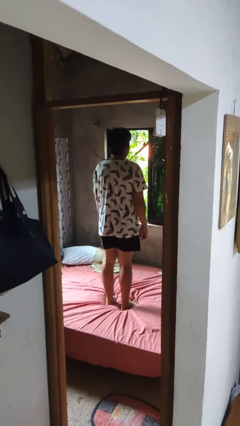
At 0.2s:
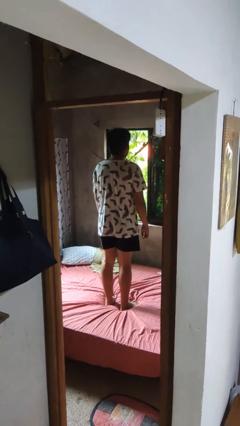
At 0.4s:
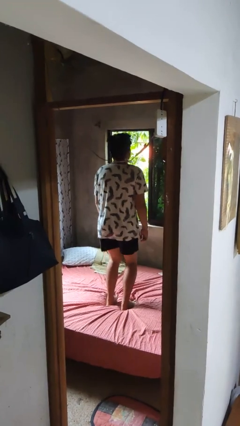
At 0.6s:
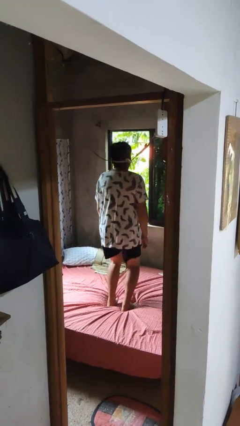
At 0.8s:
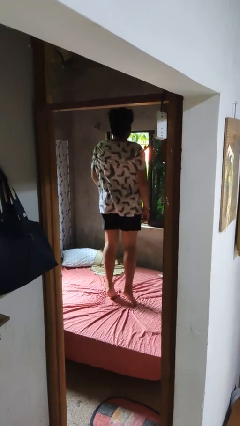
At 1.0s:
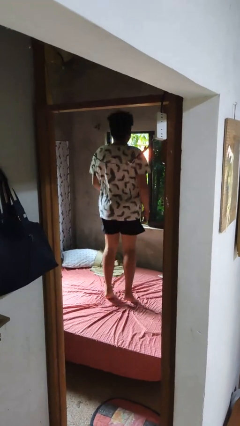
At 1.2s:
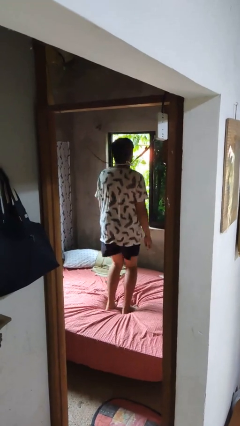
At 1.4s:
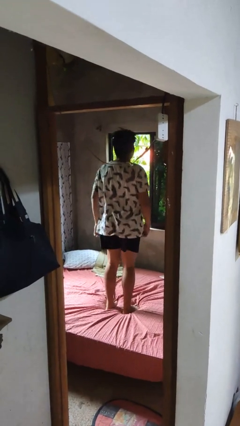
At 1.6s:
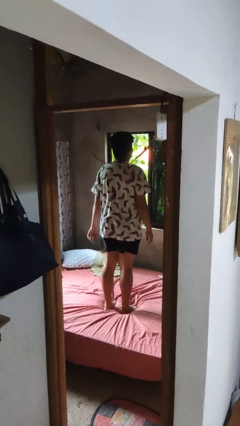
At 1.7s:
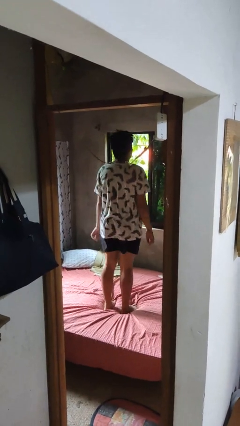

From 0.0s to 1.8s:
person jumps on bed

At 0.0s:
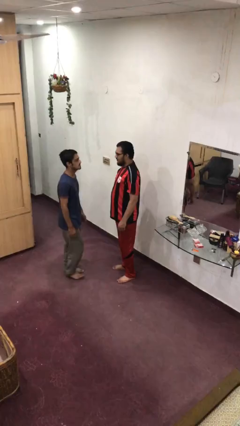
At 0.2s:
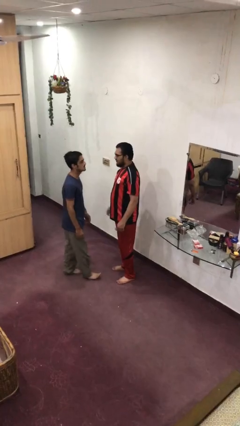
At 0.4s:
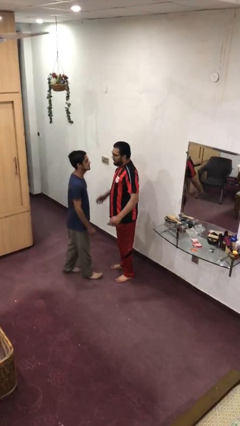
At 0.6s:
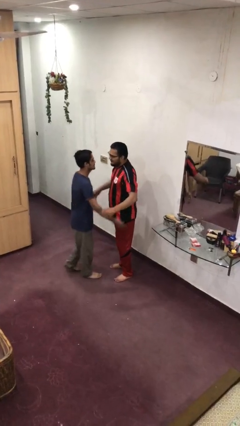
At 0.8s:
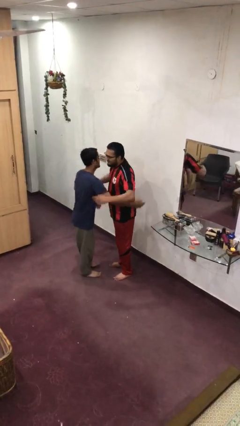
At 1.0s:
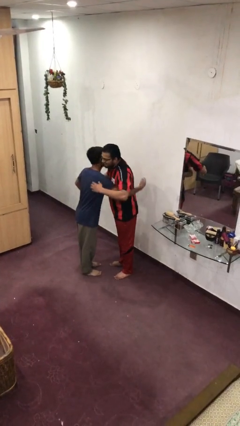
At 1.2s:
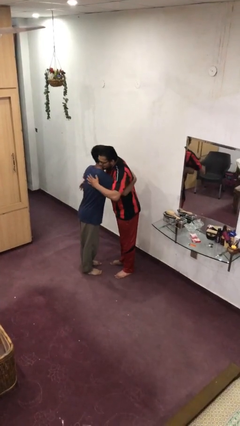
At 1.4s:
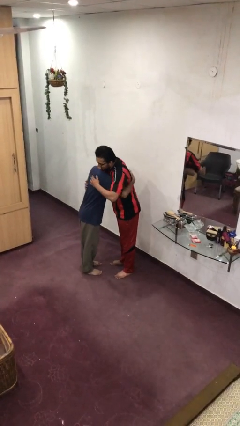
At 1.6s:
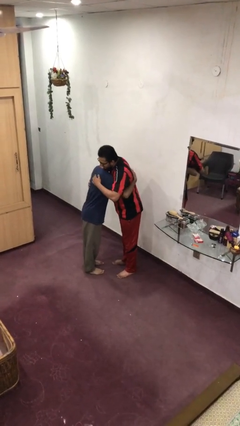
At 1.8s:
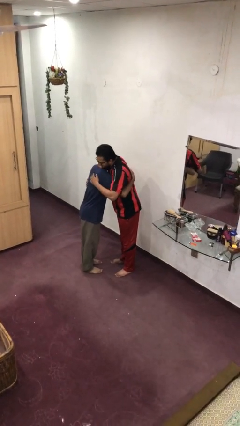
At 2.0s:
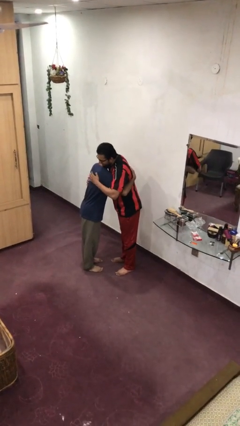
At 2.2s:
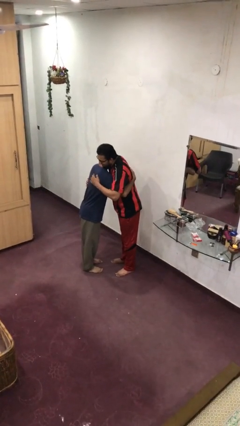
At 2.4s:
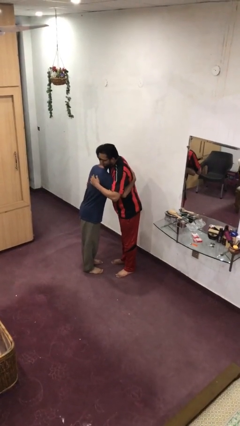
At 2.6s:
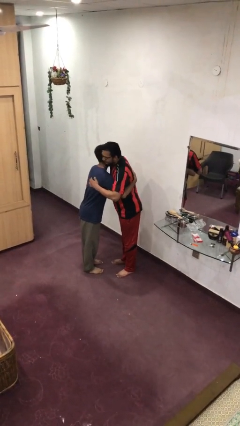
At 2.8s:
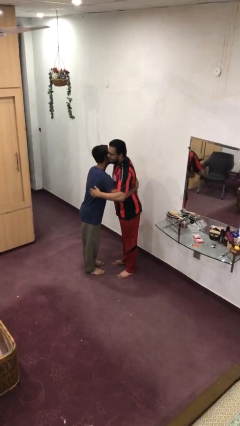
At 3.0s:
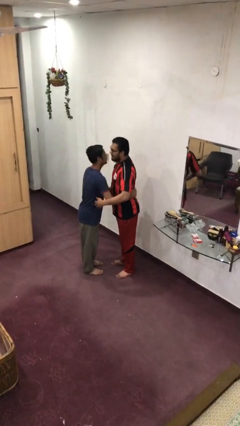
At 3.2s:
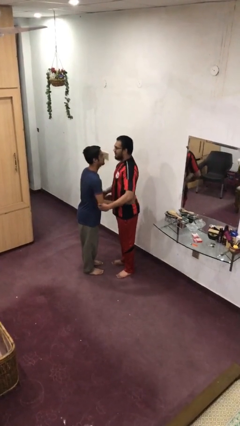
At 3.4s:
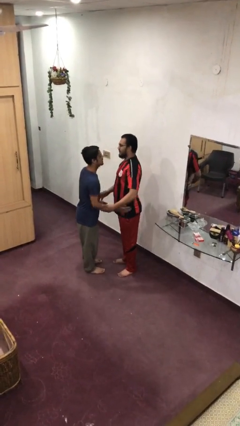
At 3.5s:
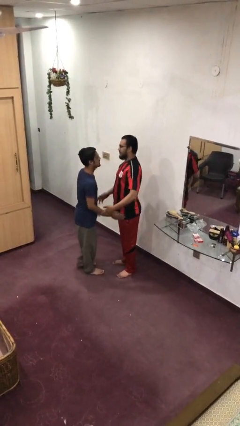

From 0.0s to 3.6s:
person embraces person

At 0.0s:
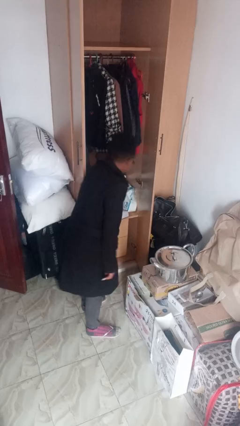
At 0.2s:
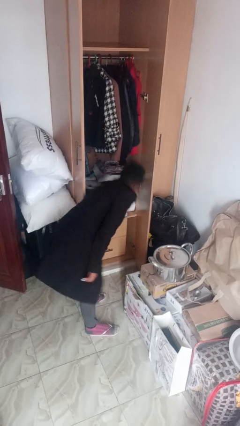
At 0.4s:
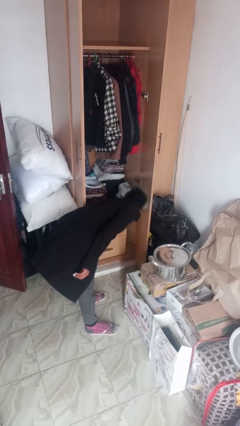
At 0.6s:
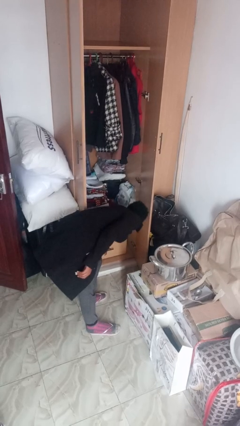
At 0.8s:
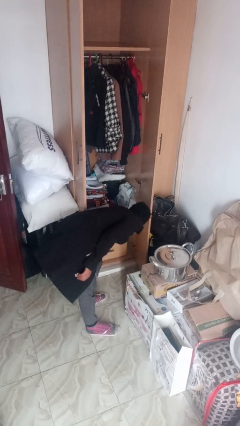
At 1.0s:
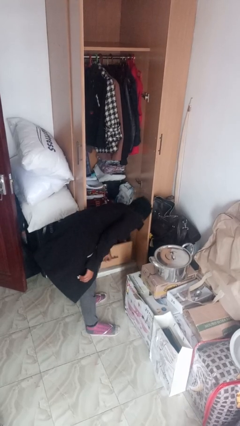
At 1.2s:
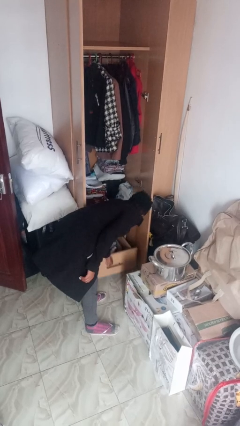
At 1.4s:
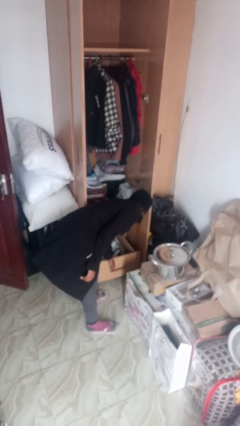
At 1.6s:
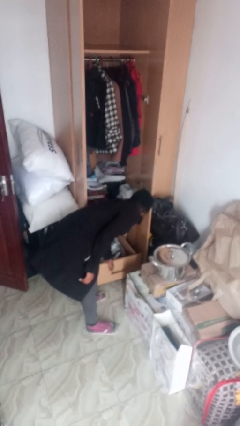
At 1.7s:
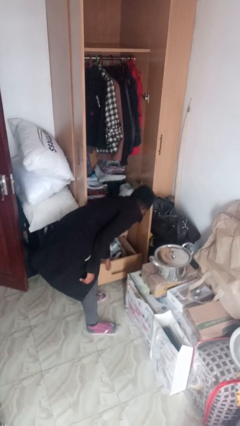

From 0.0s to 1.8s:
person opens dresser drawer

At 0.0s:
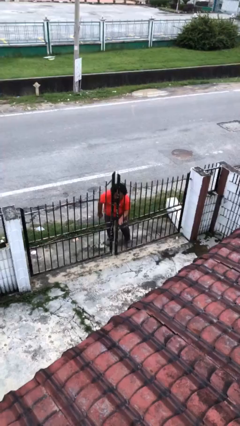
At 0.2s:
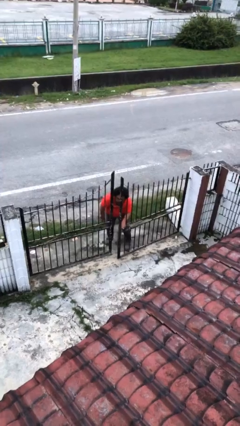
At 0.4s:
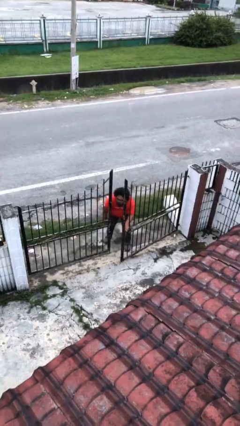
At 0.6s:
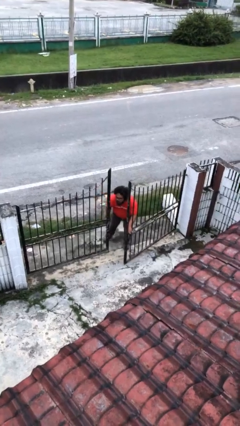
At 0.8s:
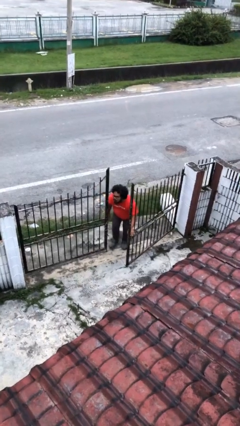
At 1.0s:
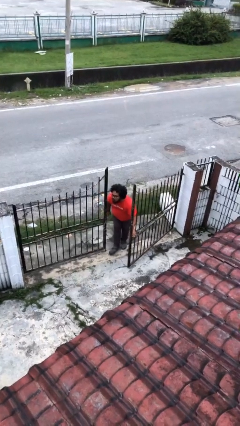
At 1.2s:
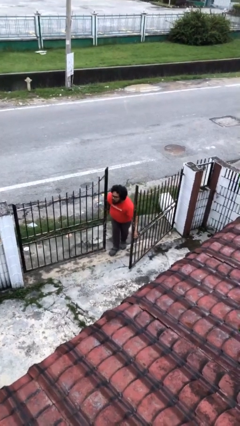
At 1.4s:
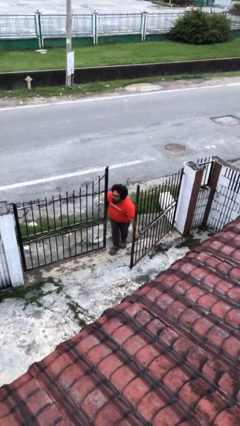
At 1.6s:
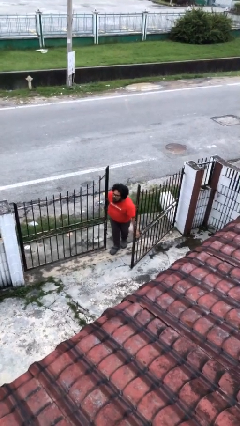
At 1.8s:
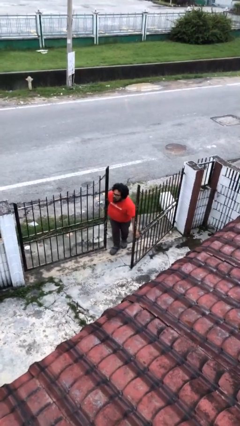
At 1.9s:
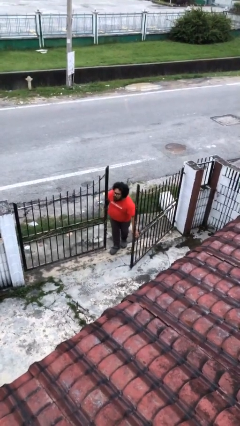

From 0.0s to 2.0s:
person opens facility door

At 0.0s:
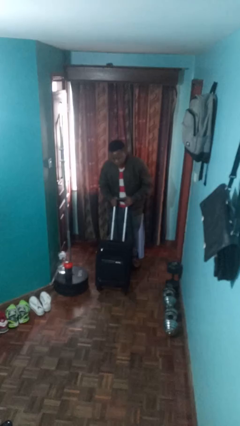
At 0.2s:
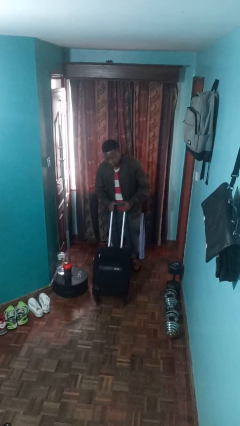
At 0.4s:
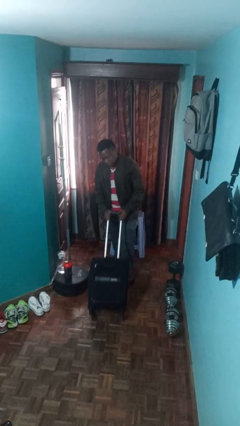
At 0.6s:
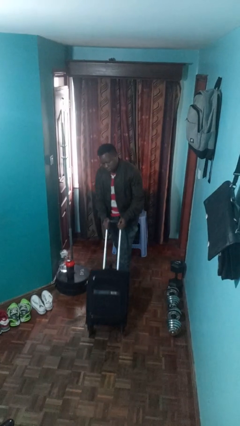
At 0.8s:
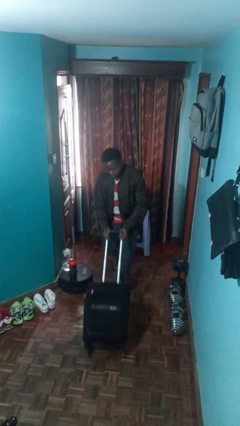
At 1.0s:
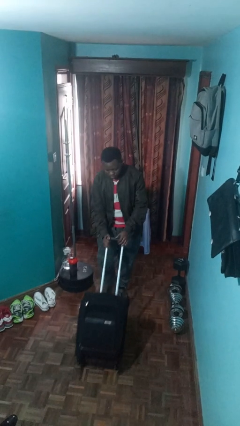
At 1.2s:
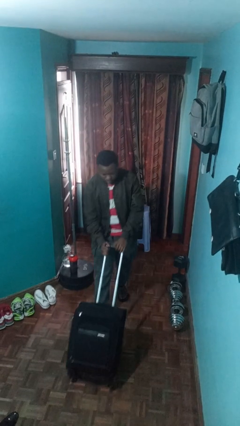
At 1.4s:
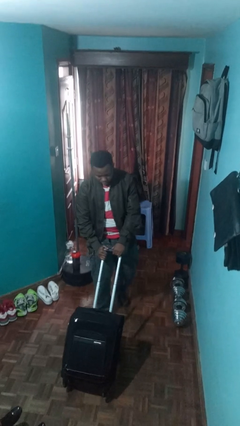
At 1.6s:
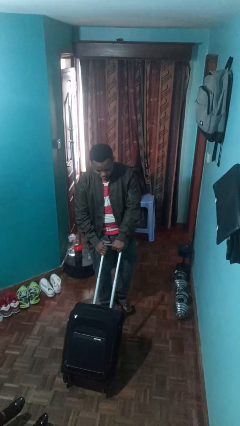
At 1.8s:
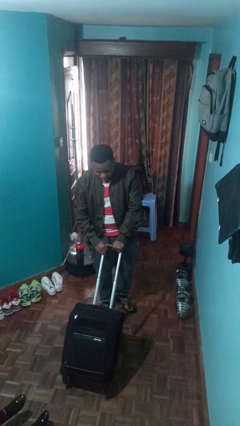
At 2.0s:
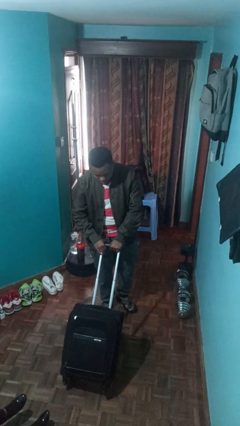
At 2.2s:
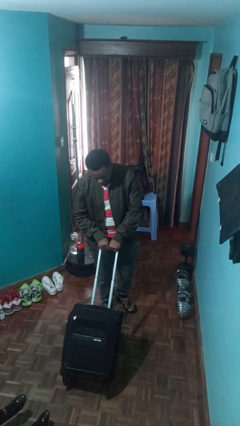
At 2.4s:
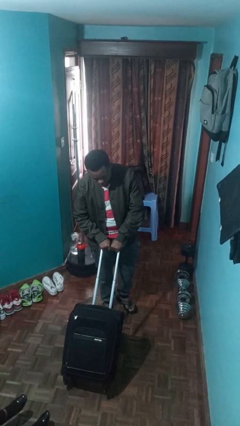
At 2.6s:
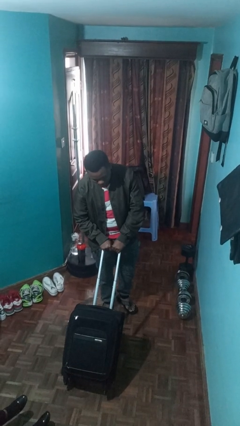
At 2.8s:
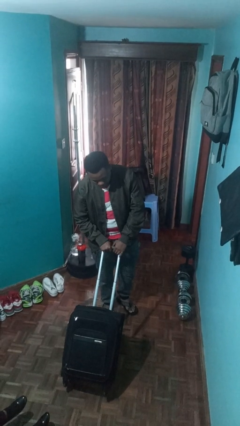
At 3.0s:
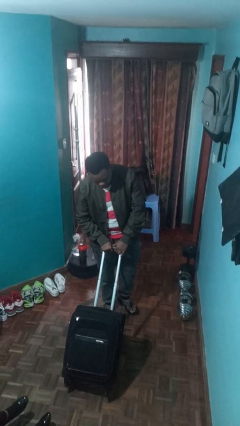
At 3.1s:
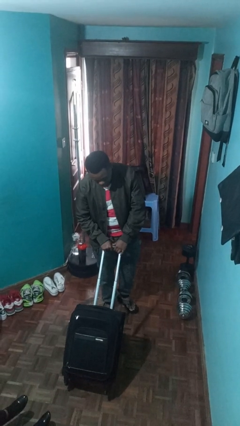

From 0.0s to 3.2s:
person pushes wheeled cart

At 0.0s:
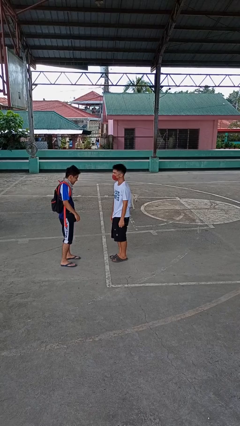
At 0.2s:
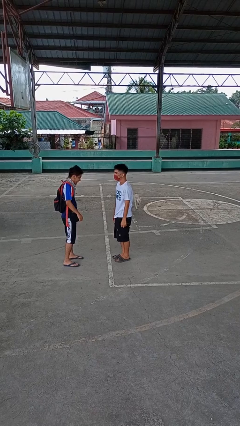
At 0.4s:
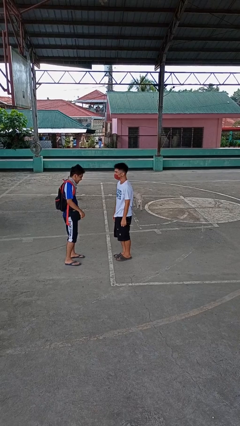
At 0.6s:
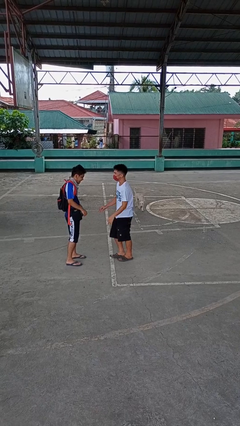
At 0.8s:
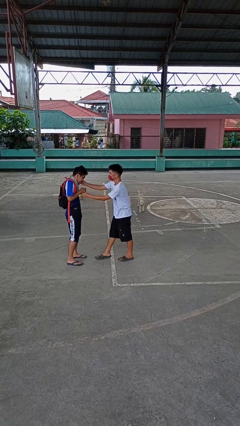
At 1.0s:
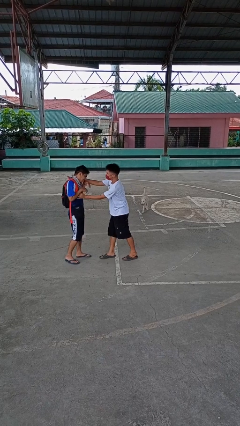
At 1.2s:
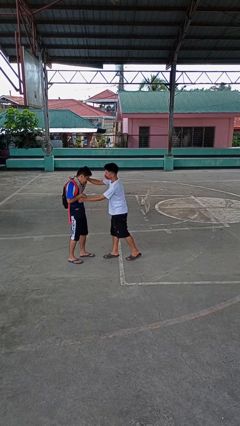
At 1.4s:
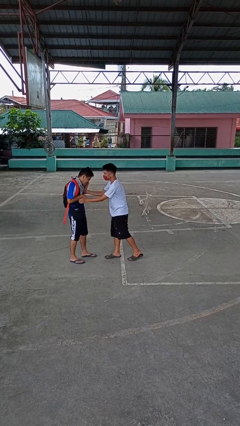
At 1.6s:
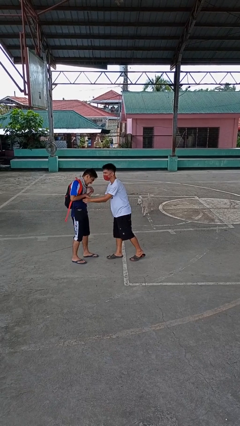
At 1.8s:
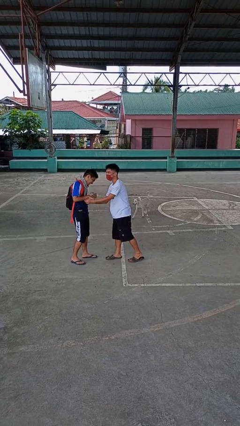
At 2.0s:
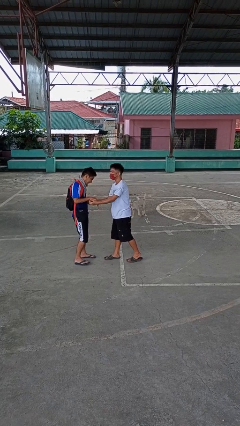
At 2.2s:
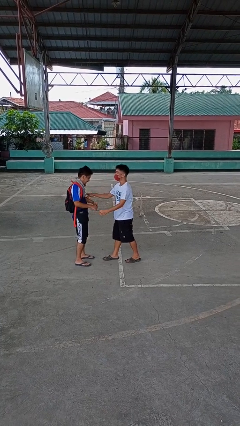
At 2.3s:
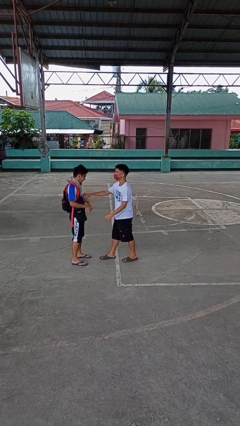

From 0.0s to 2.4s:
person tickles person

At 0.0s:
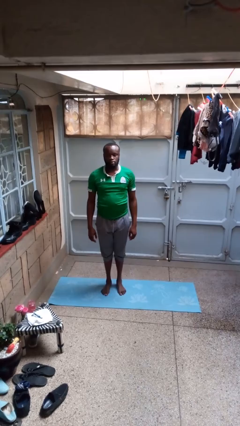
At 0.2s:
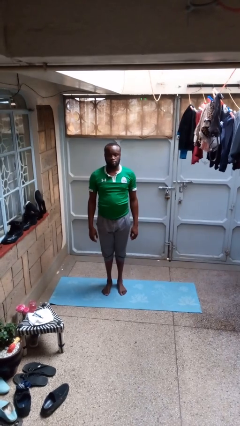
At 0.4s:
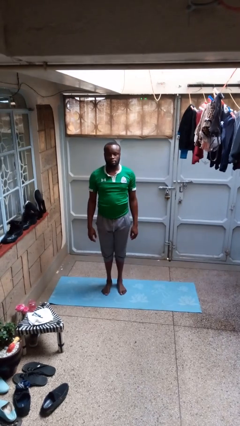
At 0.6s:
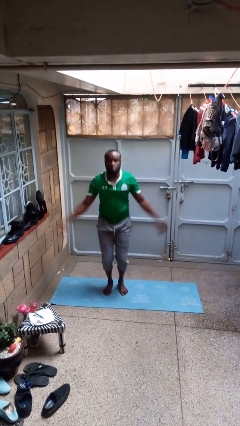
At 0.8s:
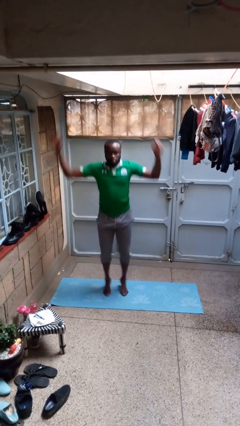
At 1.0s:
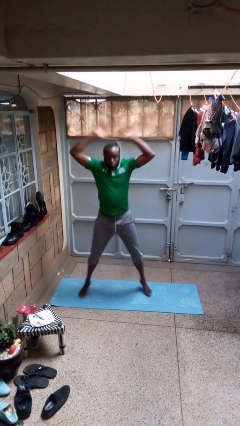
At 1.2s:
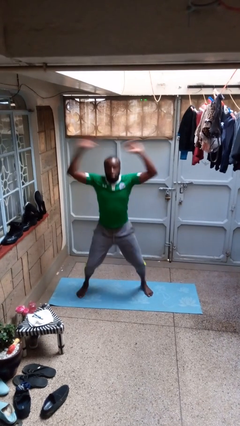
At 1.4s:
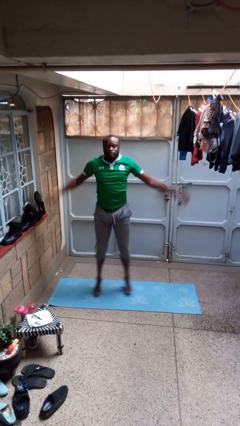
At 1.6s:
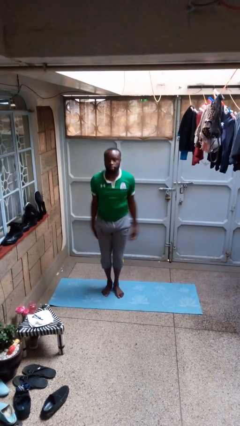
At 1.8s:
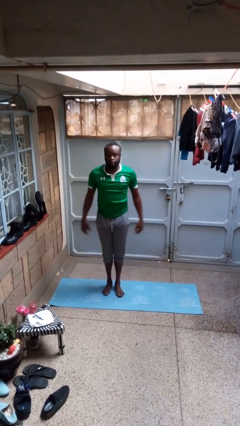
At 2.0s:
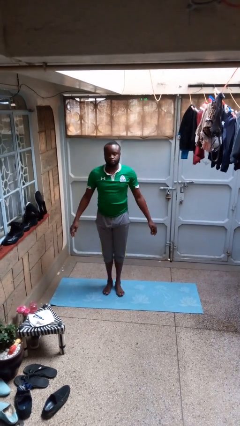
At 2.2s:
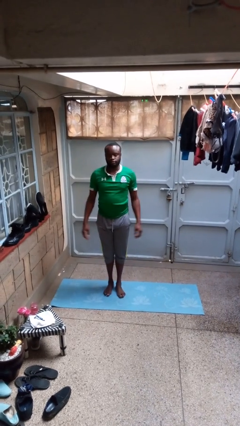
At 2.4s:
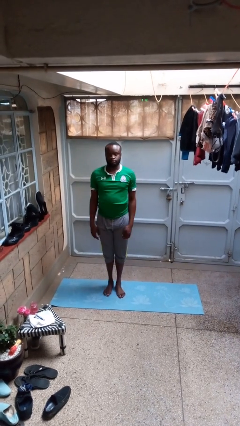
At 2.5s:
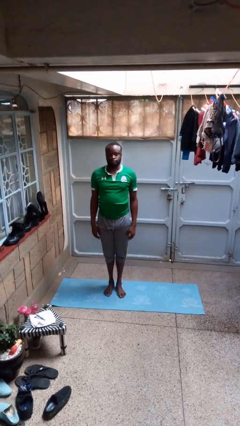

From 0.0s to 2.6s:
person exercises with jumping jacks
